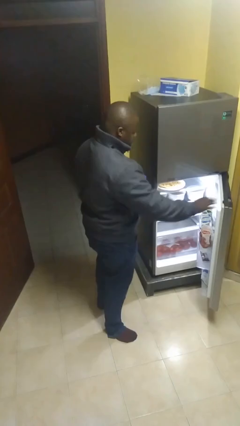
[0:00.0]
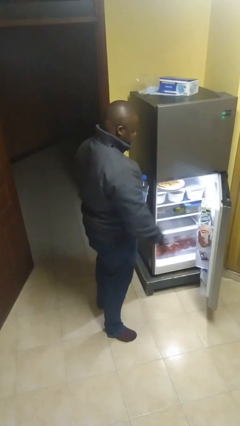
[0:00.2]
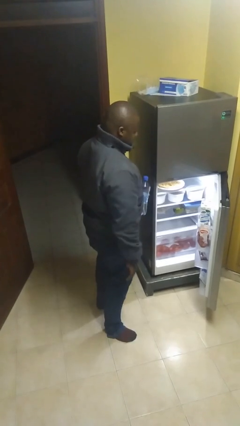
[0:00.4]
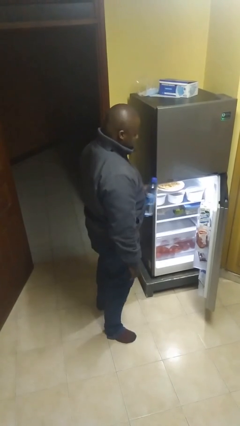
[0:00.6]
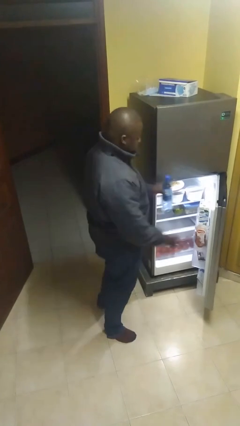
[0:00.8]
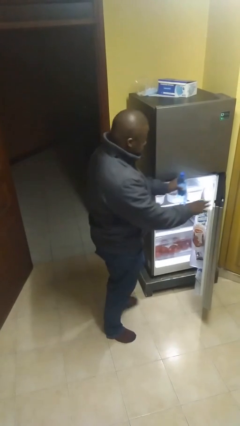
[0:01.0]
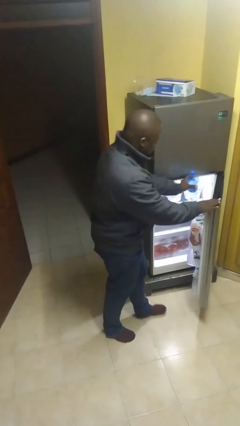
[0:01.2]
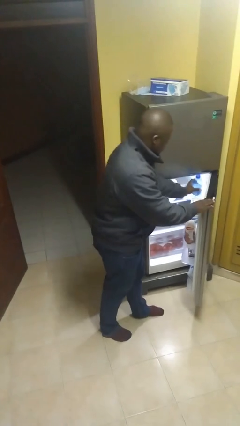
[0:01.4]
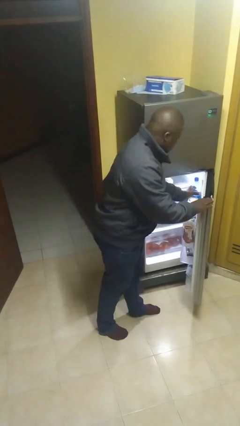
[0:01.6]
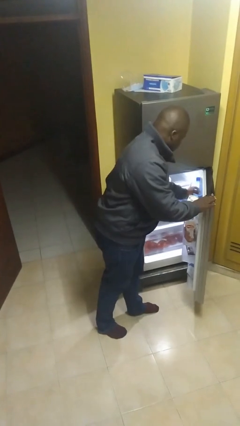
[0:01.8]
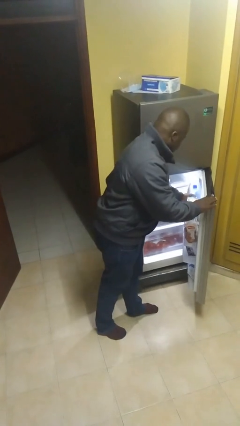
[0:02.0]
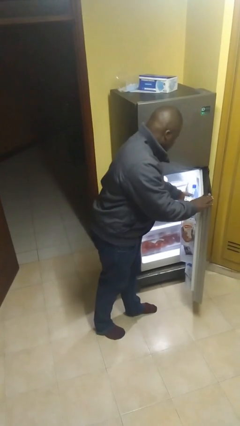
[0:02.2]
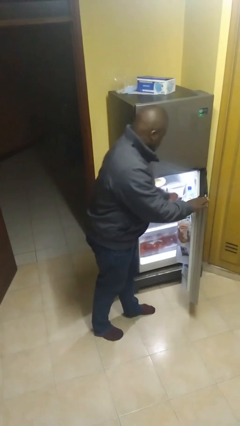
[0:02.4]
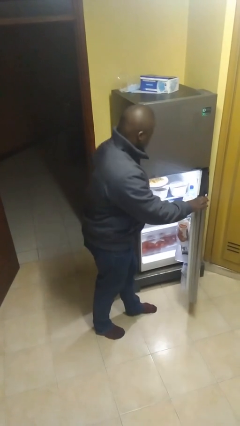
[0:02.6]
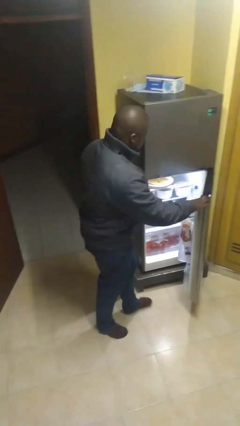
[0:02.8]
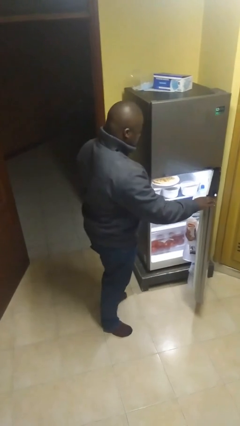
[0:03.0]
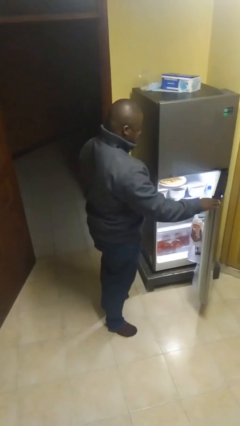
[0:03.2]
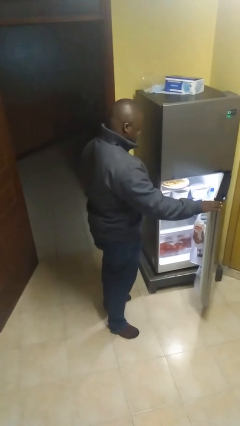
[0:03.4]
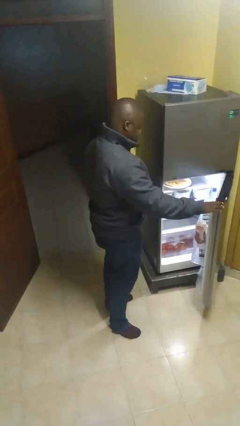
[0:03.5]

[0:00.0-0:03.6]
person puts object into refrigerator

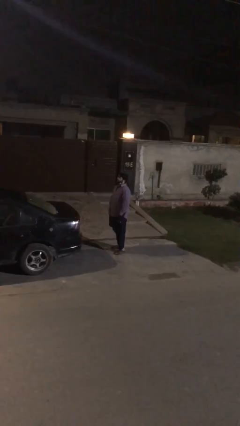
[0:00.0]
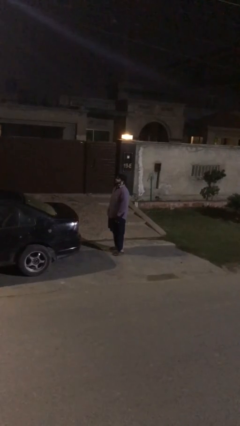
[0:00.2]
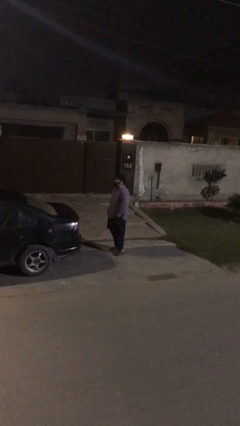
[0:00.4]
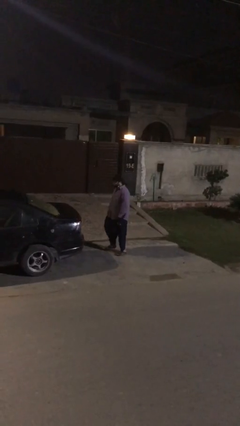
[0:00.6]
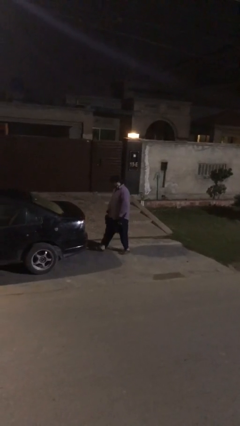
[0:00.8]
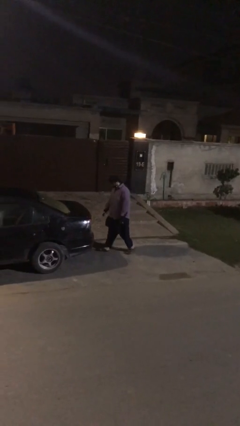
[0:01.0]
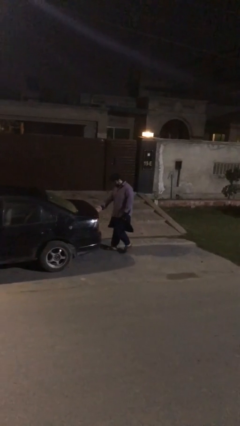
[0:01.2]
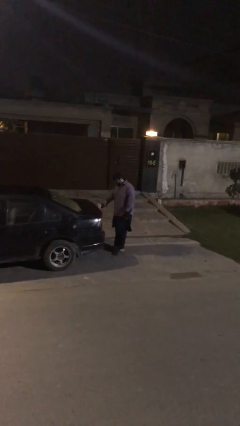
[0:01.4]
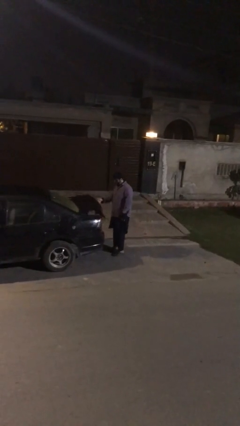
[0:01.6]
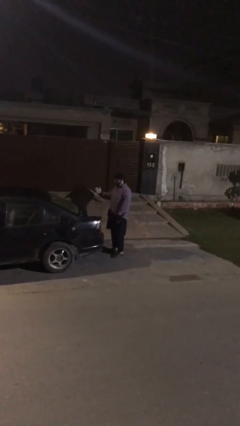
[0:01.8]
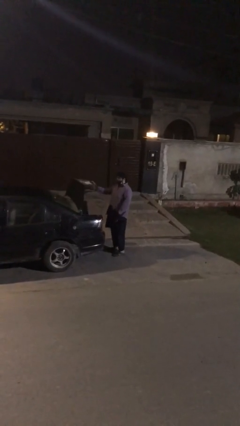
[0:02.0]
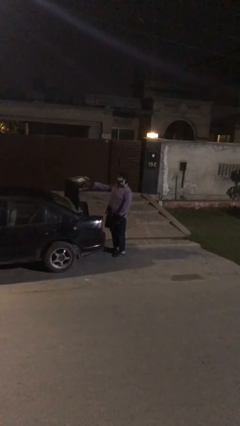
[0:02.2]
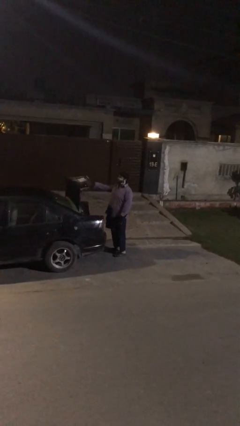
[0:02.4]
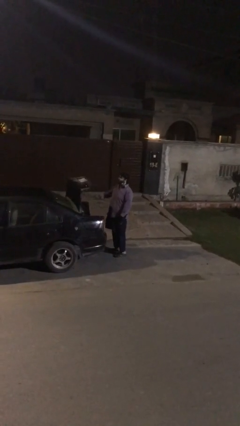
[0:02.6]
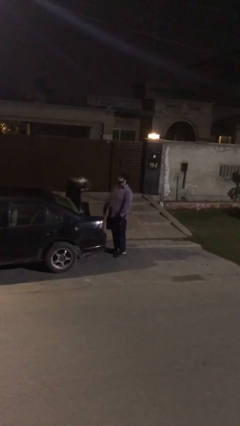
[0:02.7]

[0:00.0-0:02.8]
person opens car trunk

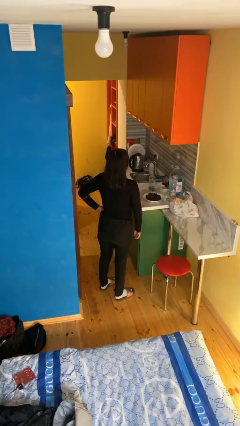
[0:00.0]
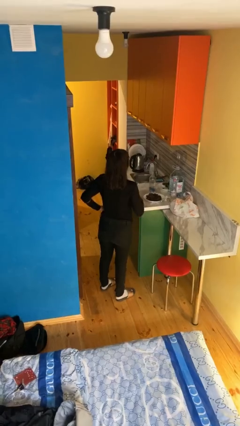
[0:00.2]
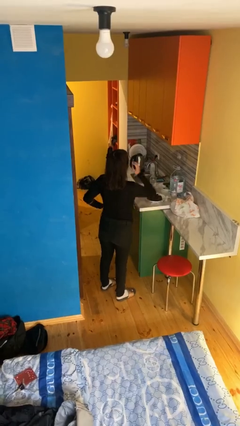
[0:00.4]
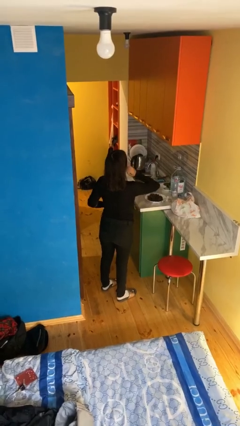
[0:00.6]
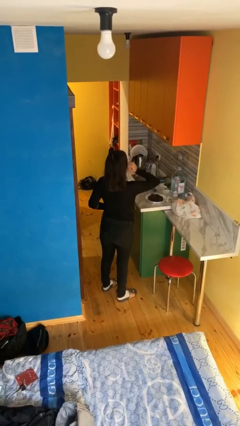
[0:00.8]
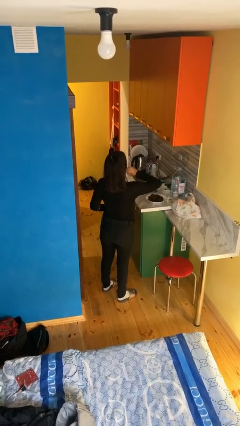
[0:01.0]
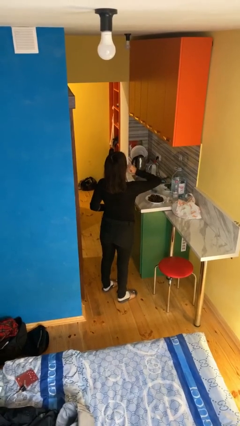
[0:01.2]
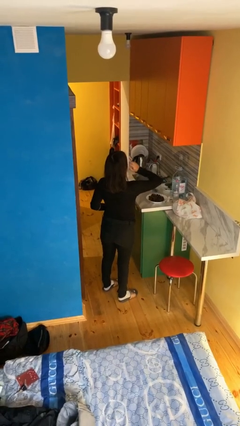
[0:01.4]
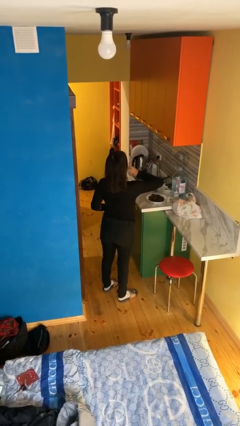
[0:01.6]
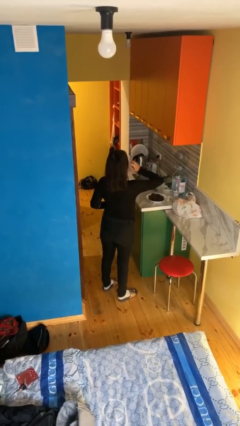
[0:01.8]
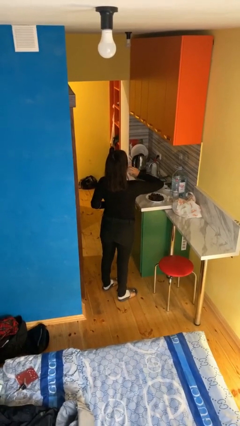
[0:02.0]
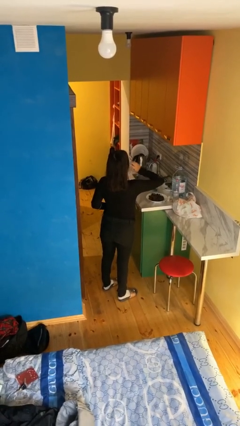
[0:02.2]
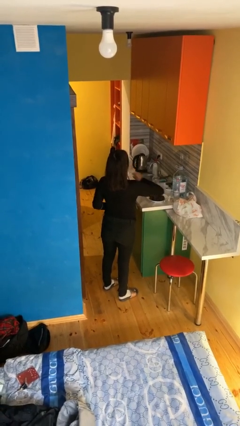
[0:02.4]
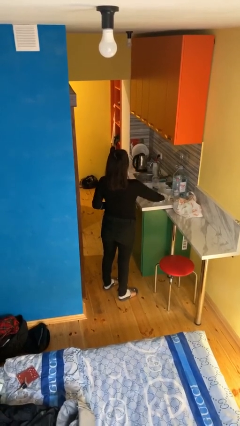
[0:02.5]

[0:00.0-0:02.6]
person scratches face

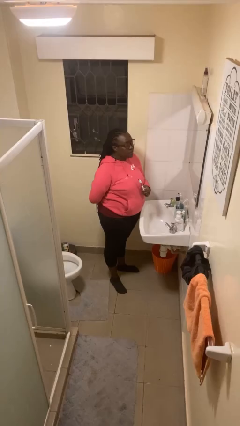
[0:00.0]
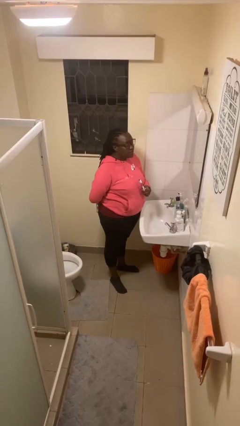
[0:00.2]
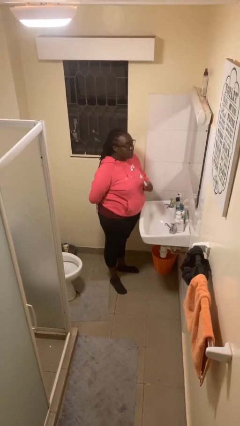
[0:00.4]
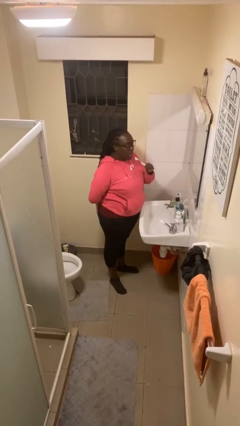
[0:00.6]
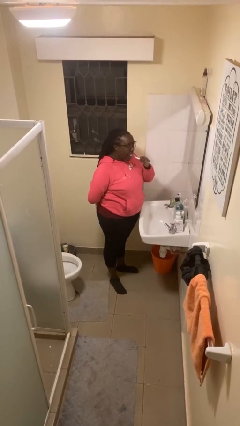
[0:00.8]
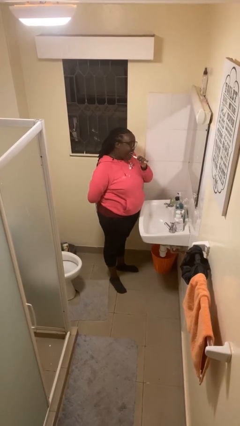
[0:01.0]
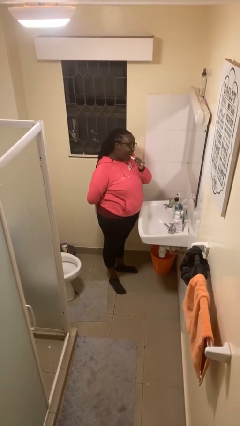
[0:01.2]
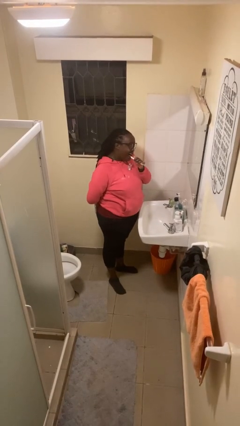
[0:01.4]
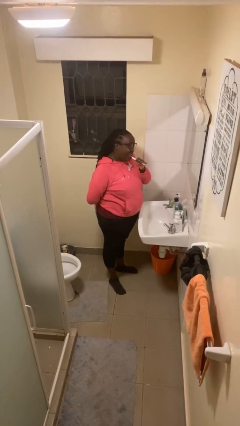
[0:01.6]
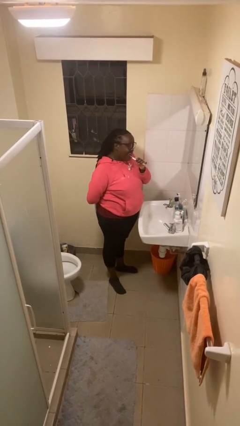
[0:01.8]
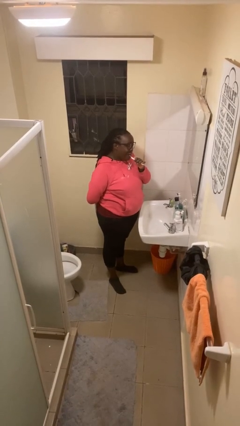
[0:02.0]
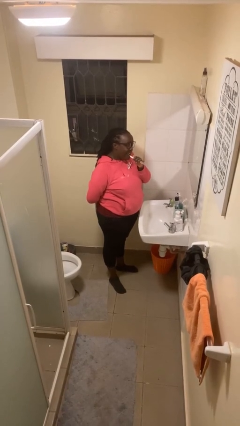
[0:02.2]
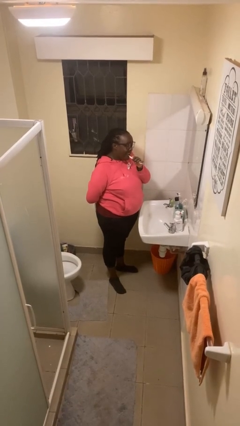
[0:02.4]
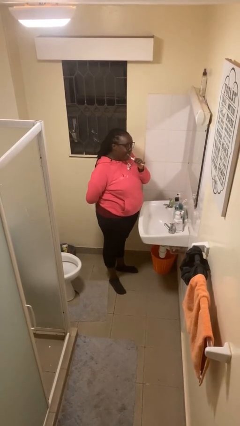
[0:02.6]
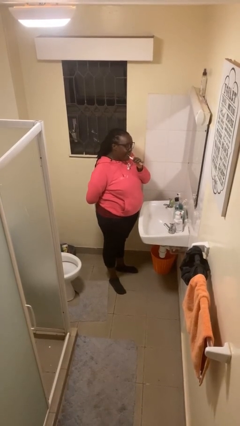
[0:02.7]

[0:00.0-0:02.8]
person brushes teeth

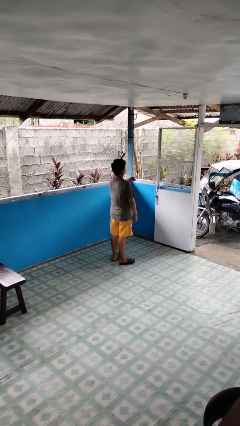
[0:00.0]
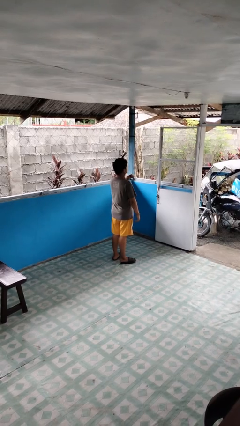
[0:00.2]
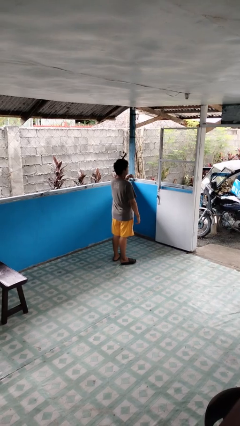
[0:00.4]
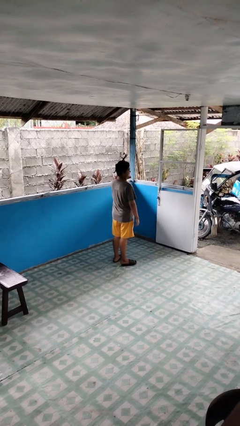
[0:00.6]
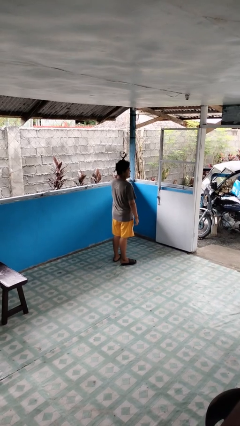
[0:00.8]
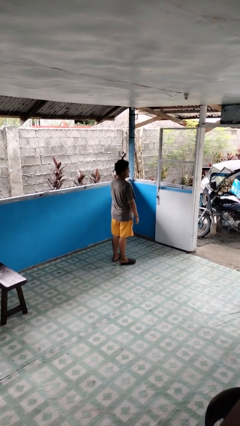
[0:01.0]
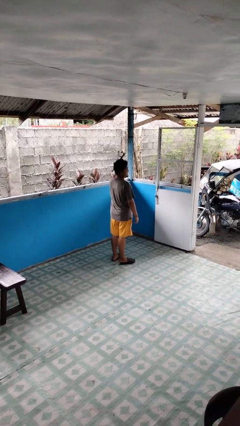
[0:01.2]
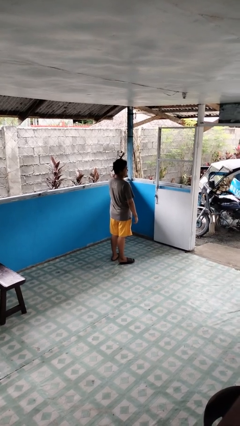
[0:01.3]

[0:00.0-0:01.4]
person gestures cut

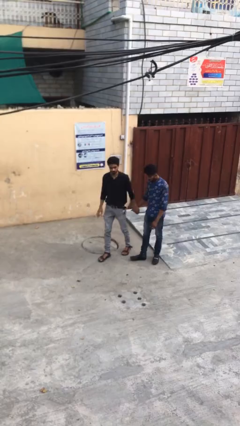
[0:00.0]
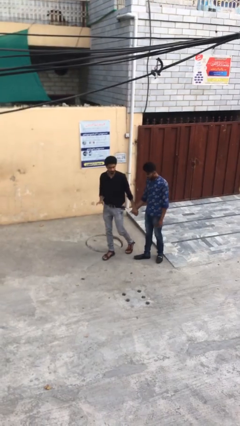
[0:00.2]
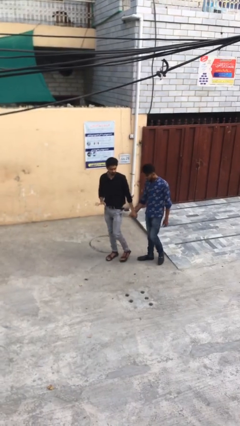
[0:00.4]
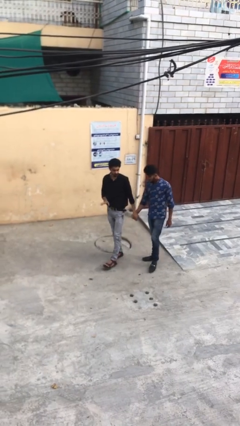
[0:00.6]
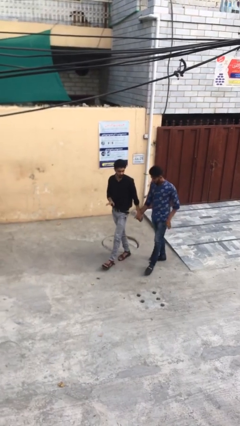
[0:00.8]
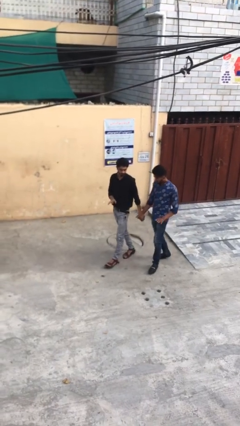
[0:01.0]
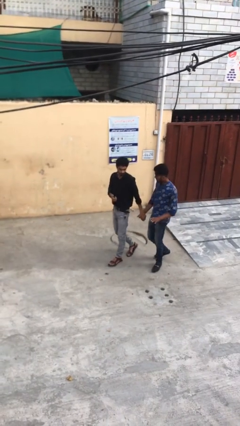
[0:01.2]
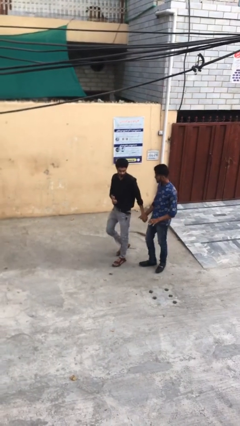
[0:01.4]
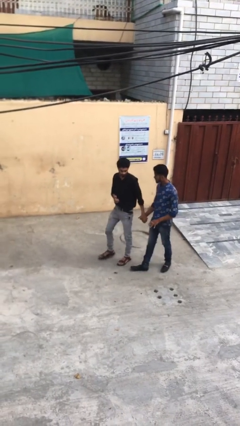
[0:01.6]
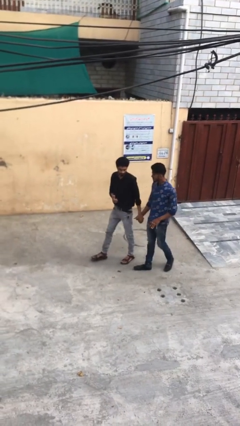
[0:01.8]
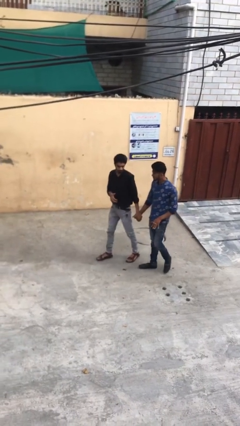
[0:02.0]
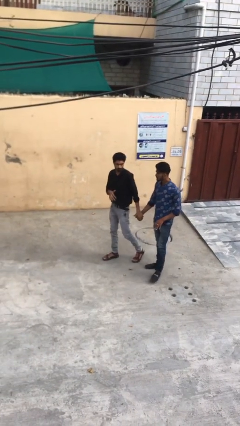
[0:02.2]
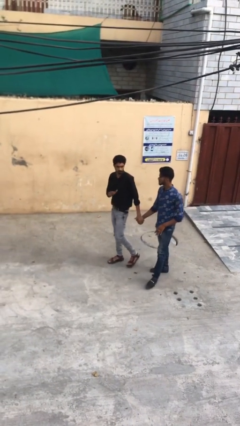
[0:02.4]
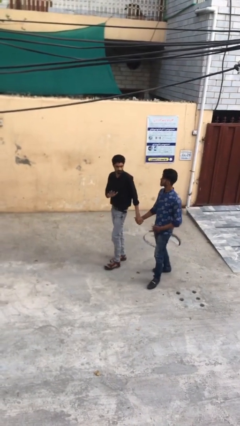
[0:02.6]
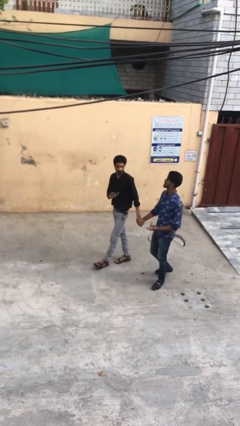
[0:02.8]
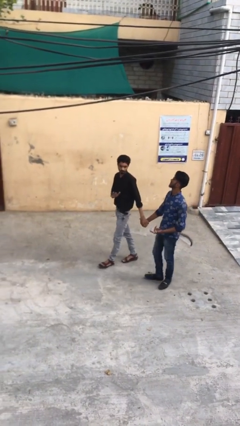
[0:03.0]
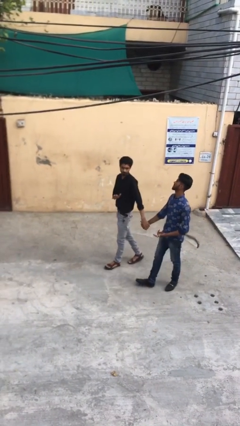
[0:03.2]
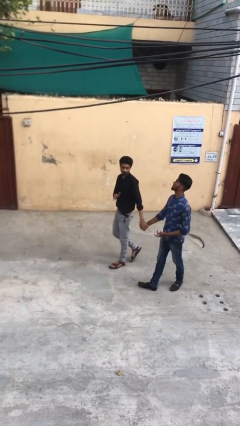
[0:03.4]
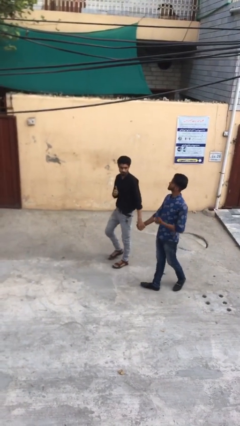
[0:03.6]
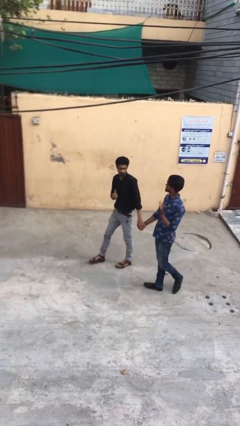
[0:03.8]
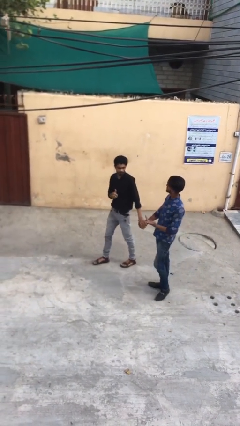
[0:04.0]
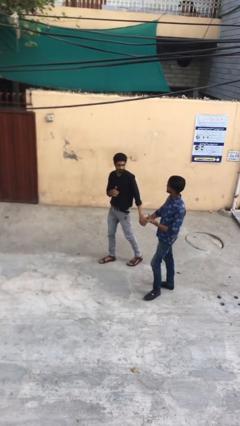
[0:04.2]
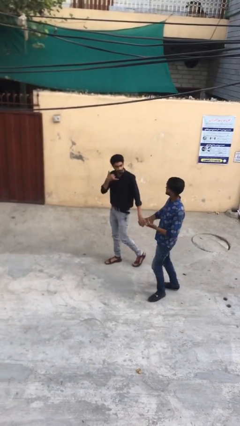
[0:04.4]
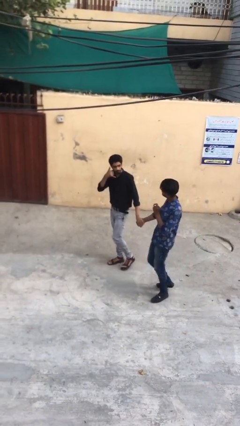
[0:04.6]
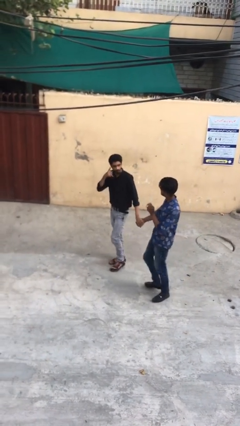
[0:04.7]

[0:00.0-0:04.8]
person holds hand
